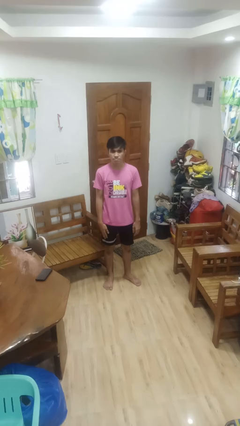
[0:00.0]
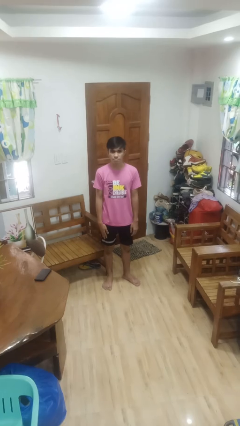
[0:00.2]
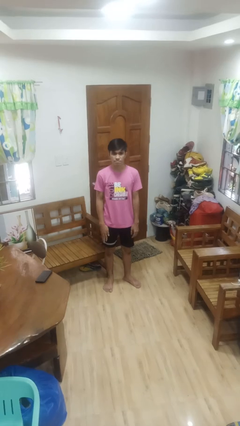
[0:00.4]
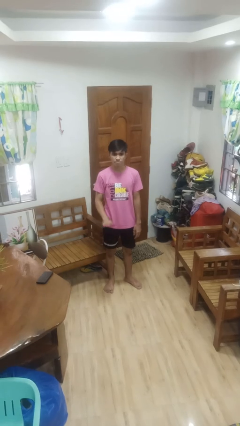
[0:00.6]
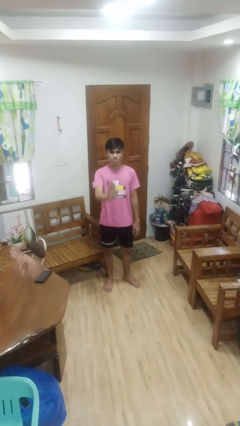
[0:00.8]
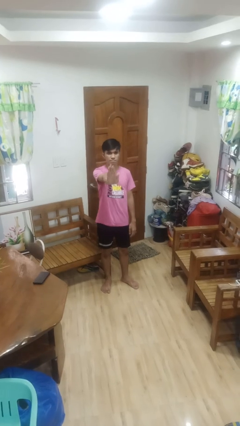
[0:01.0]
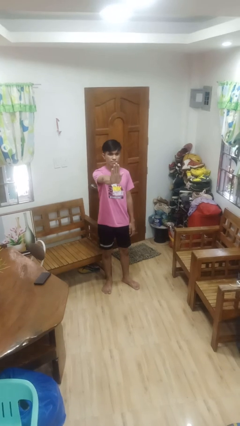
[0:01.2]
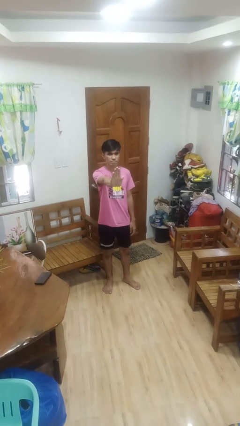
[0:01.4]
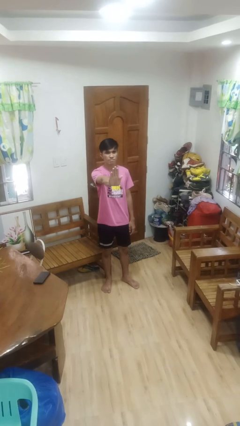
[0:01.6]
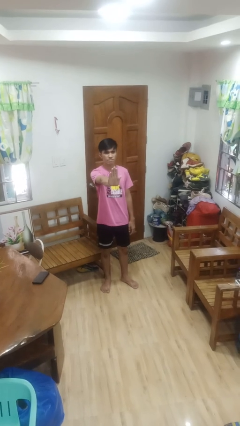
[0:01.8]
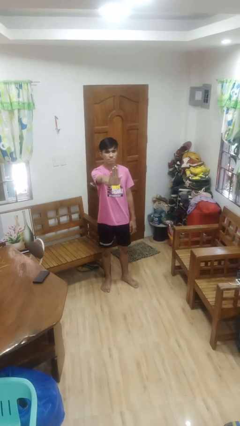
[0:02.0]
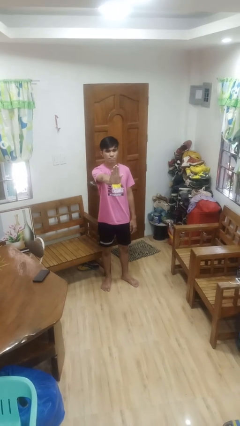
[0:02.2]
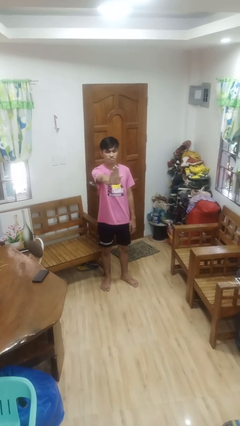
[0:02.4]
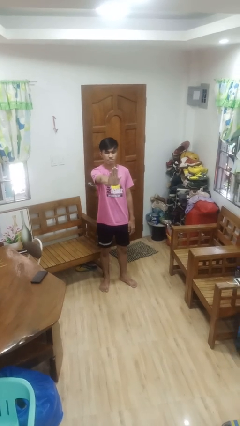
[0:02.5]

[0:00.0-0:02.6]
person gestures stop

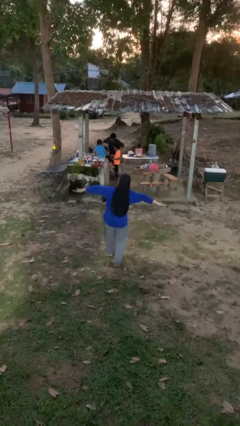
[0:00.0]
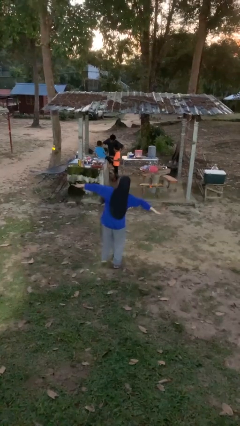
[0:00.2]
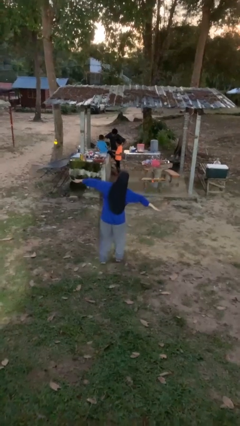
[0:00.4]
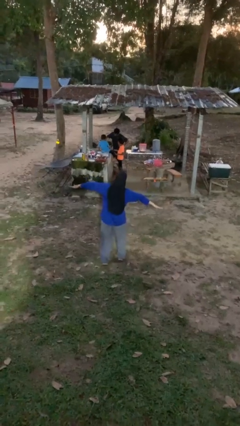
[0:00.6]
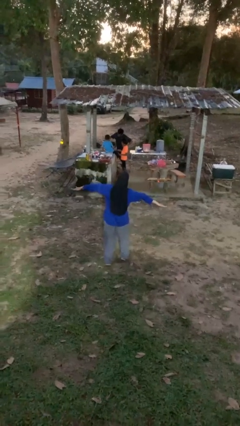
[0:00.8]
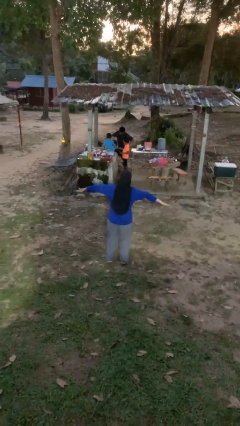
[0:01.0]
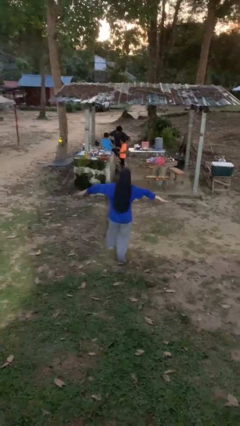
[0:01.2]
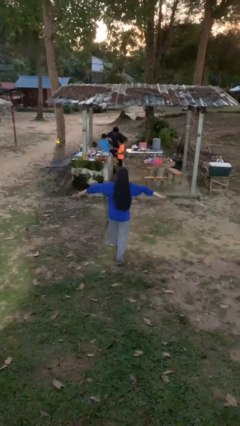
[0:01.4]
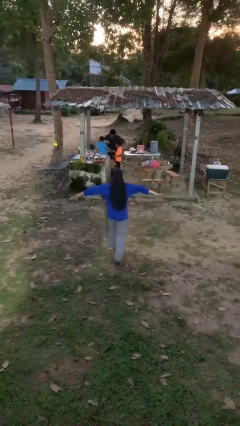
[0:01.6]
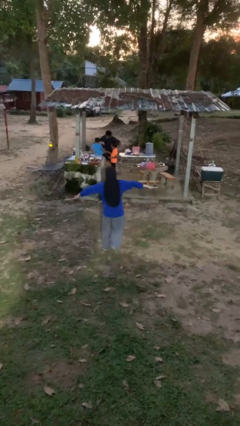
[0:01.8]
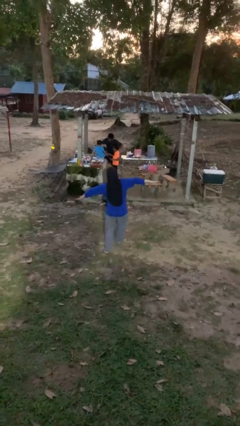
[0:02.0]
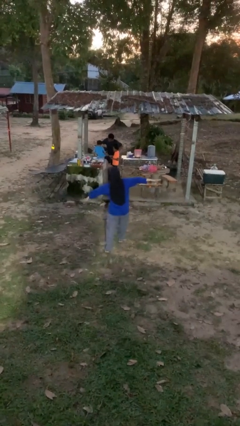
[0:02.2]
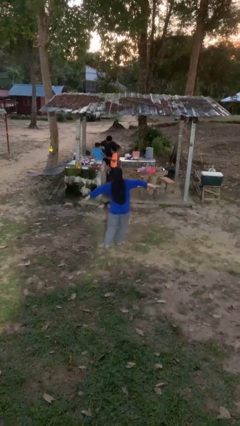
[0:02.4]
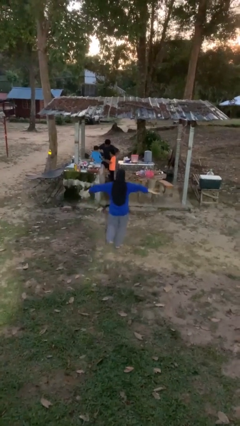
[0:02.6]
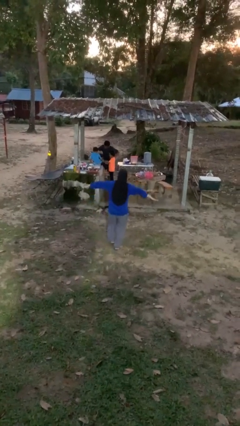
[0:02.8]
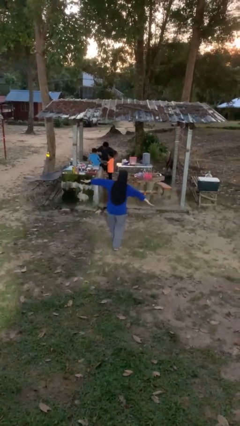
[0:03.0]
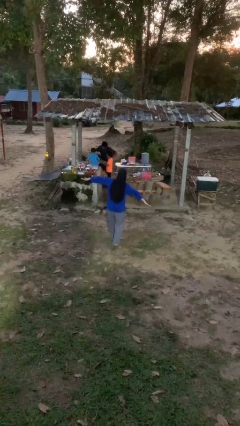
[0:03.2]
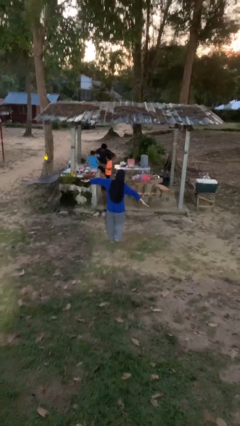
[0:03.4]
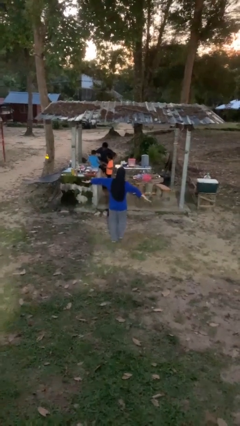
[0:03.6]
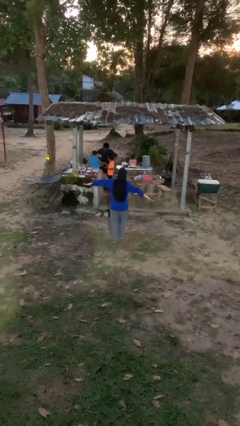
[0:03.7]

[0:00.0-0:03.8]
person walks tiptoe

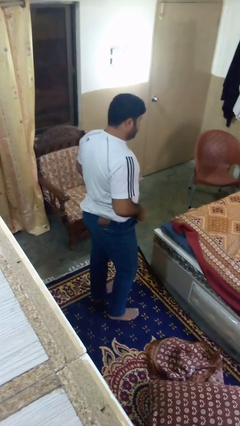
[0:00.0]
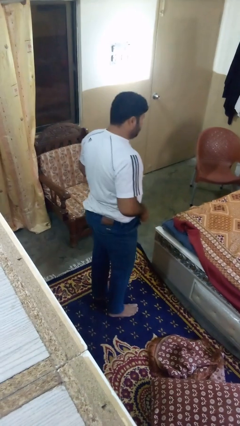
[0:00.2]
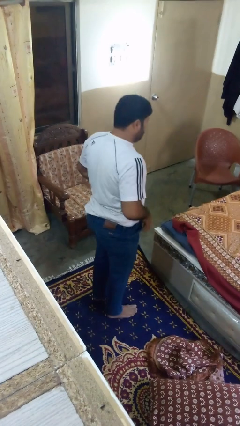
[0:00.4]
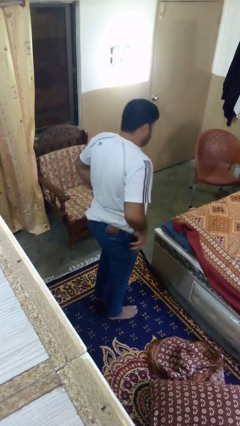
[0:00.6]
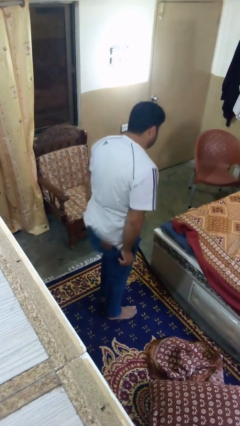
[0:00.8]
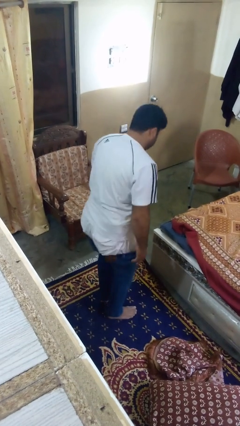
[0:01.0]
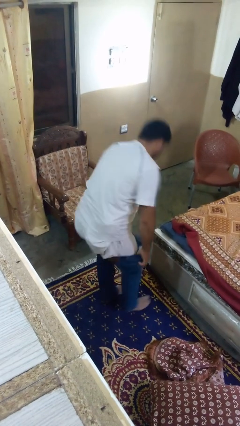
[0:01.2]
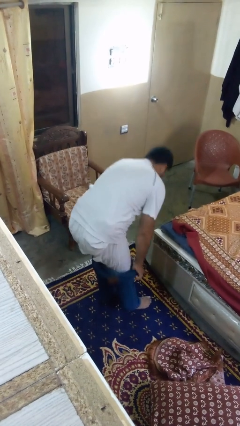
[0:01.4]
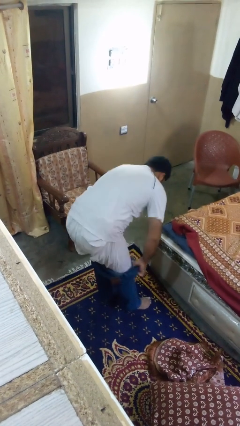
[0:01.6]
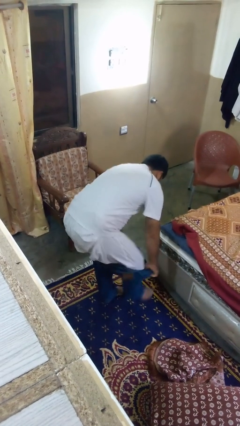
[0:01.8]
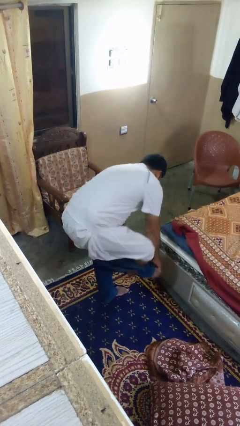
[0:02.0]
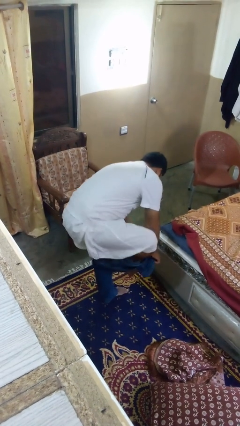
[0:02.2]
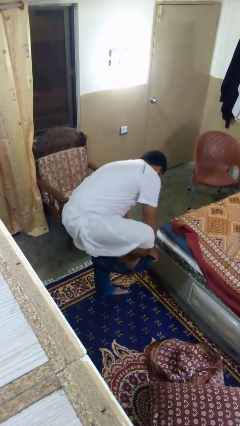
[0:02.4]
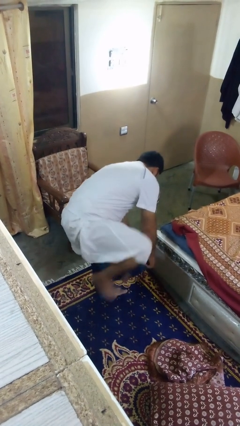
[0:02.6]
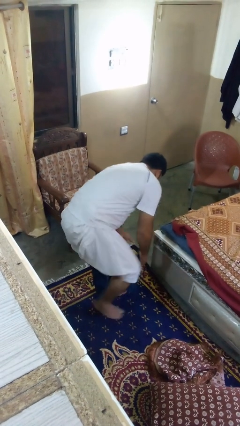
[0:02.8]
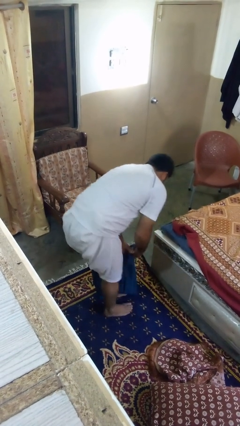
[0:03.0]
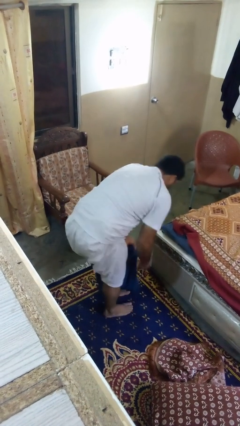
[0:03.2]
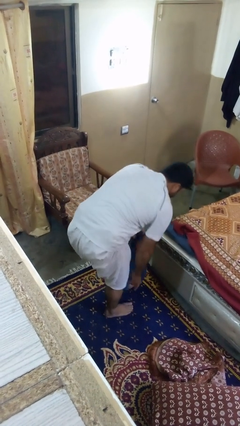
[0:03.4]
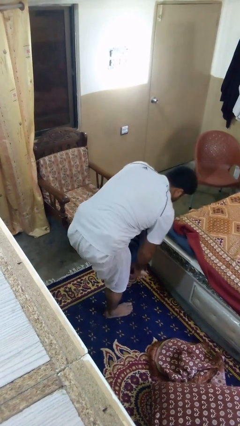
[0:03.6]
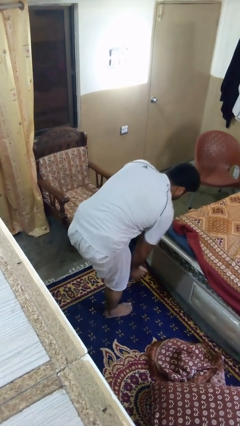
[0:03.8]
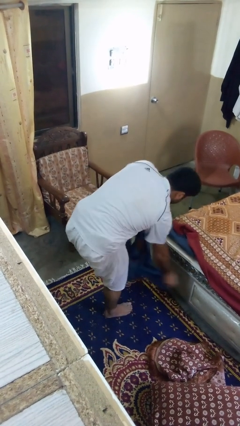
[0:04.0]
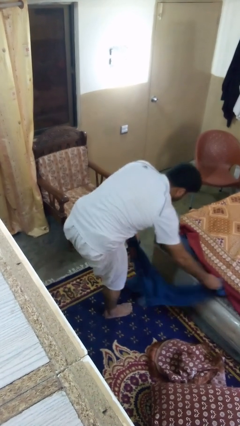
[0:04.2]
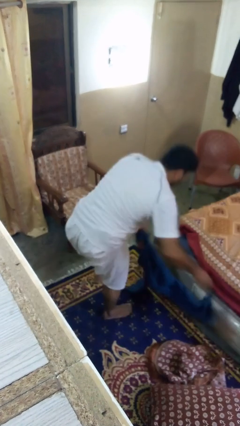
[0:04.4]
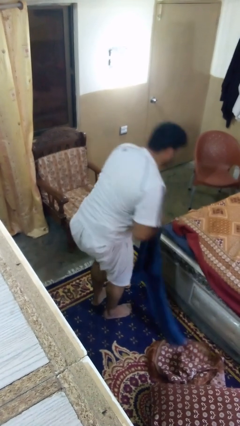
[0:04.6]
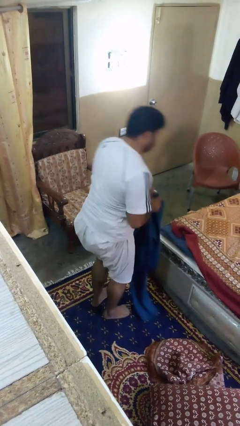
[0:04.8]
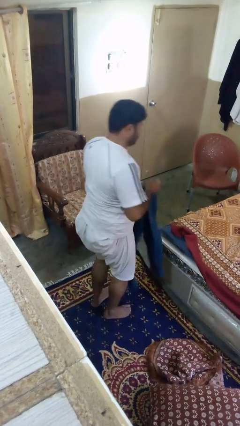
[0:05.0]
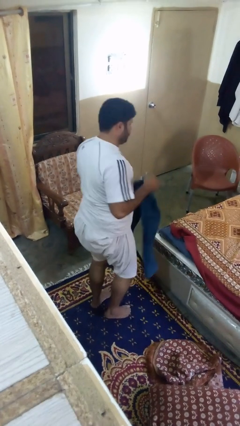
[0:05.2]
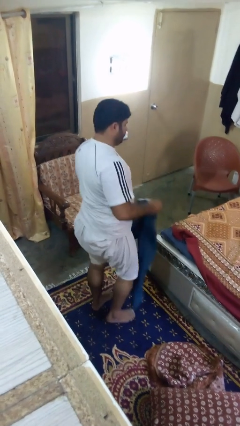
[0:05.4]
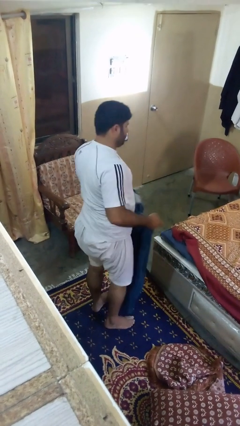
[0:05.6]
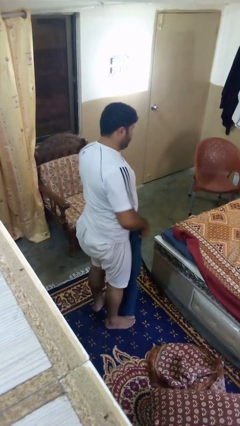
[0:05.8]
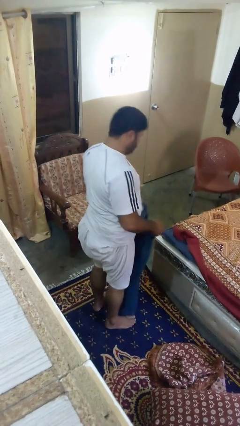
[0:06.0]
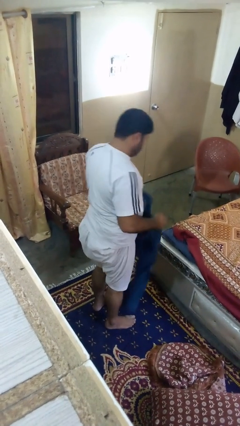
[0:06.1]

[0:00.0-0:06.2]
person takes off pants

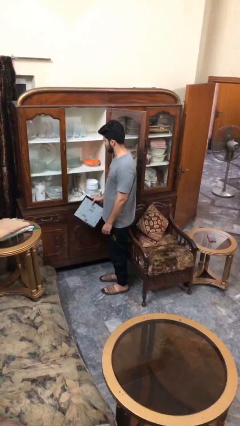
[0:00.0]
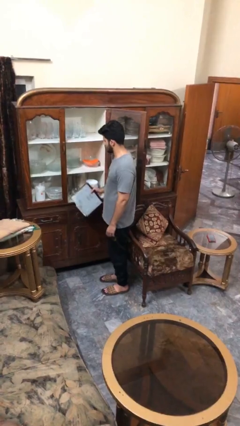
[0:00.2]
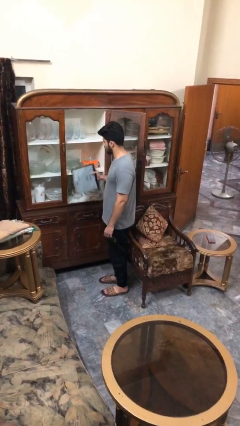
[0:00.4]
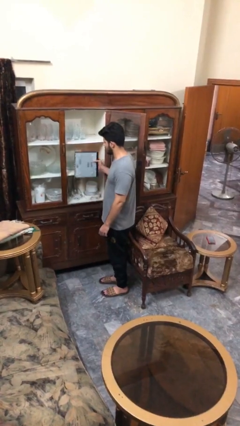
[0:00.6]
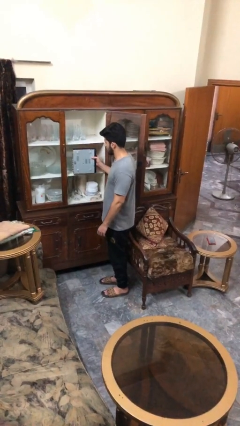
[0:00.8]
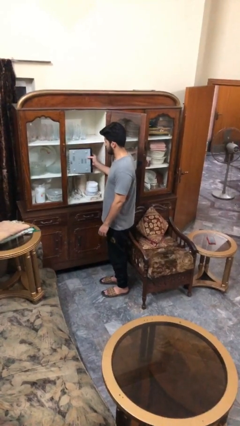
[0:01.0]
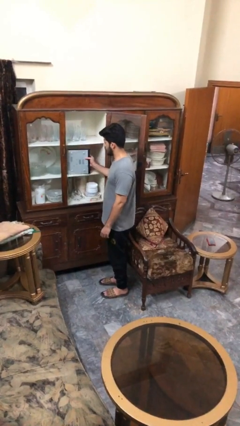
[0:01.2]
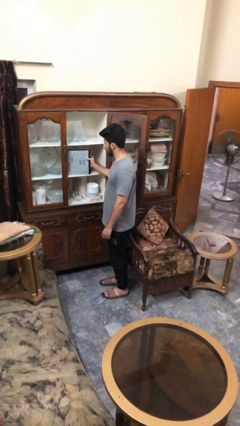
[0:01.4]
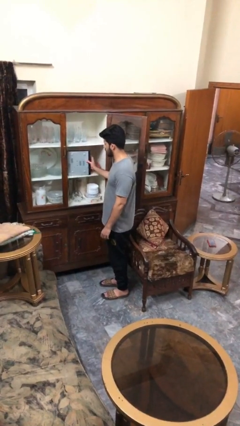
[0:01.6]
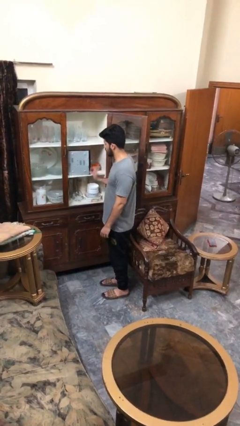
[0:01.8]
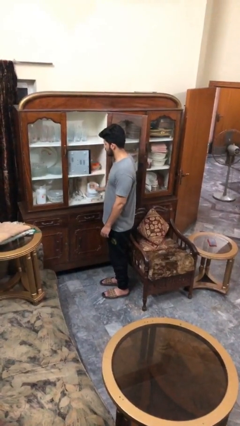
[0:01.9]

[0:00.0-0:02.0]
person puts down object into cabinet

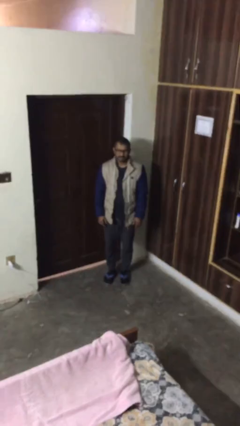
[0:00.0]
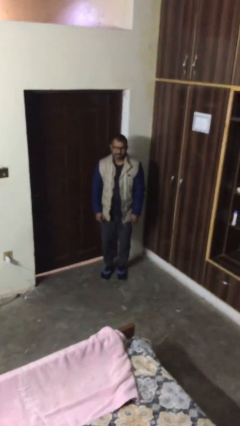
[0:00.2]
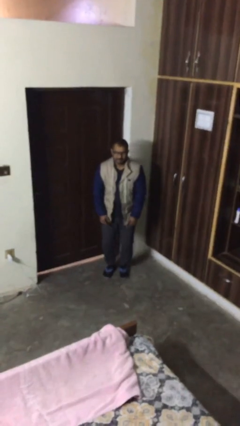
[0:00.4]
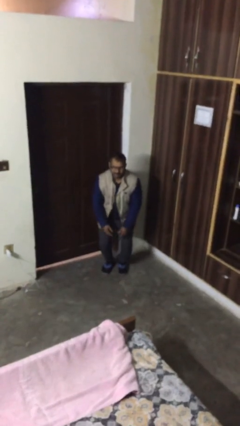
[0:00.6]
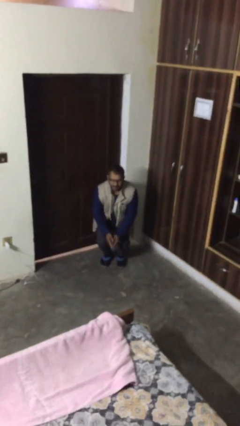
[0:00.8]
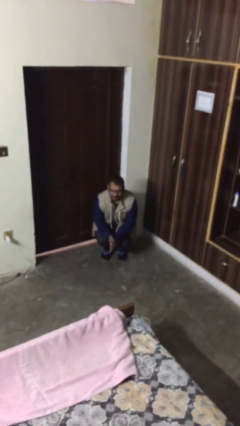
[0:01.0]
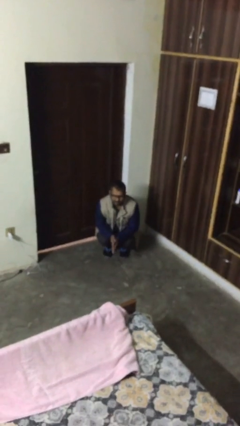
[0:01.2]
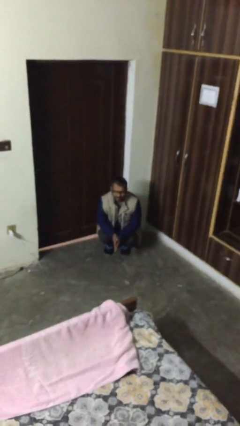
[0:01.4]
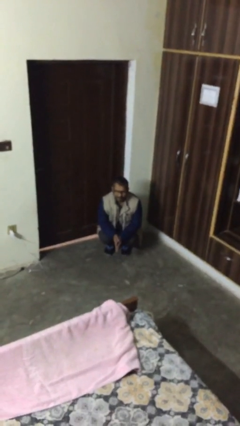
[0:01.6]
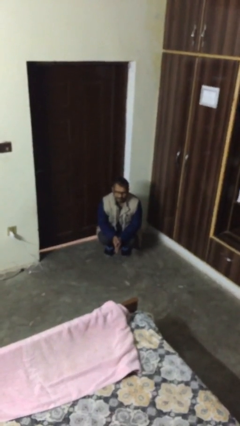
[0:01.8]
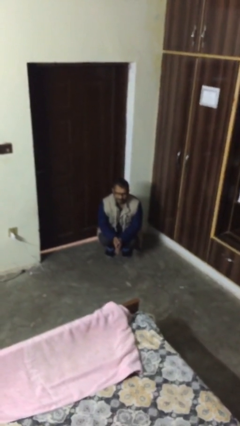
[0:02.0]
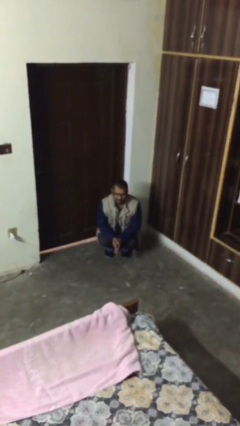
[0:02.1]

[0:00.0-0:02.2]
person sits down

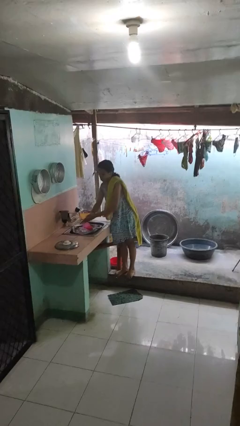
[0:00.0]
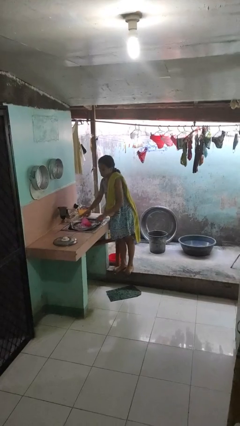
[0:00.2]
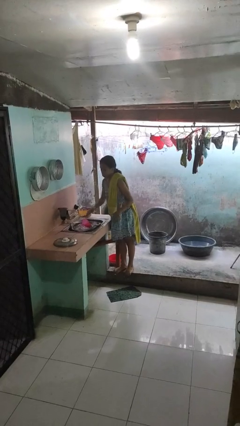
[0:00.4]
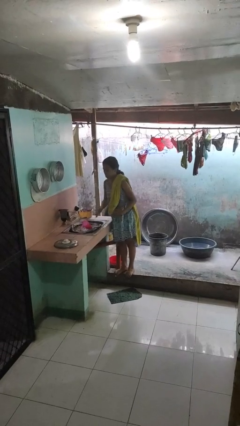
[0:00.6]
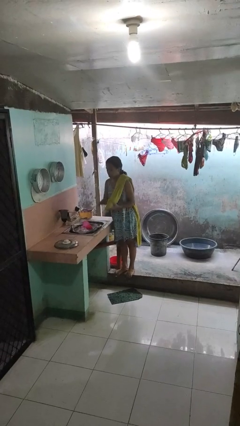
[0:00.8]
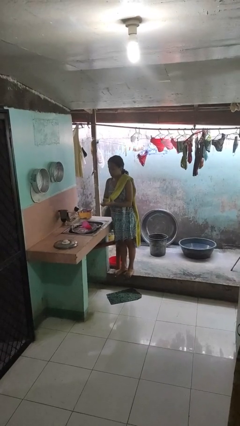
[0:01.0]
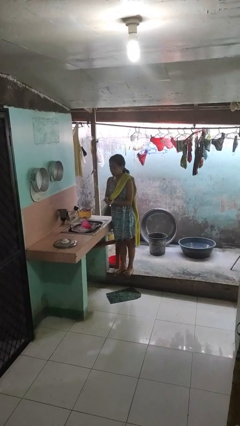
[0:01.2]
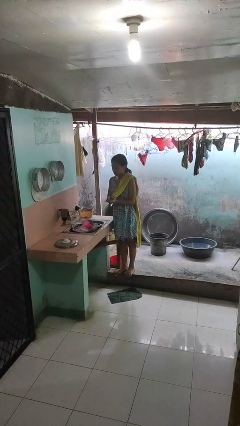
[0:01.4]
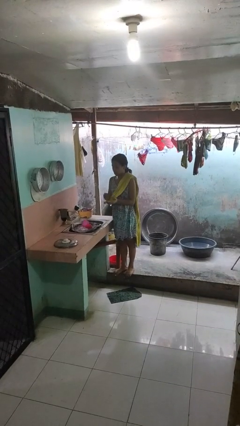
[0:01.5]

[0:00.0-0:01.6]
person dries hands with towel
